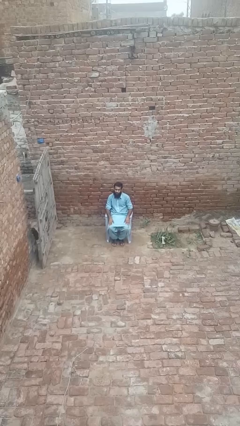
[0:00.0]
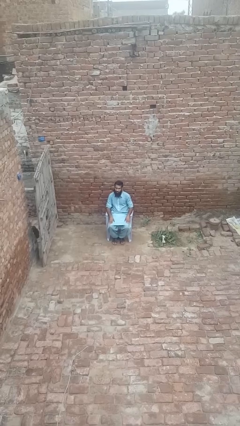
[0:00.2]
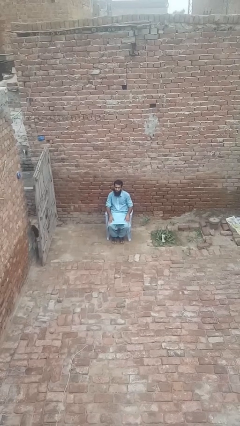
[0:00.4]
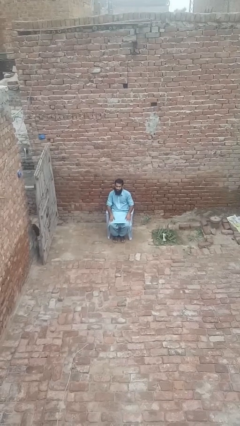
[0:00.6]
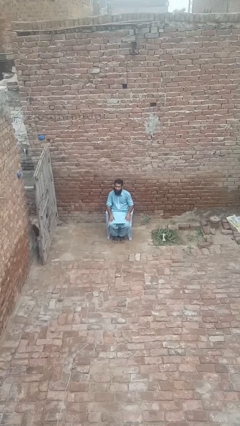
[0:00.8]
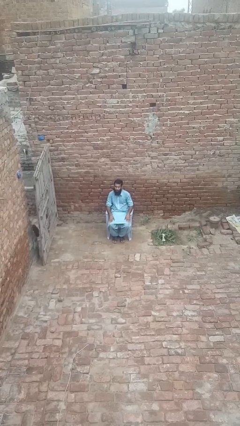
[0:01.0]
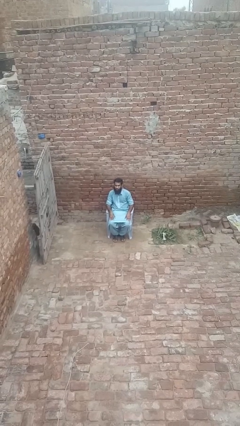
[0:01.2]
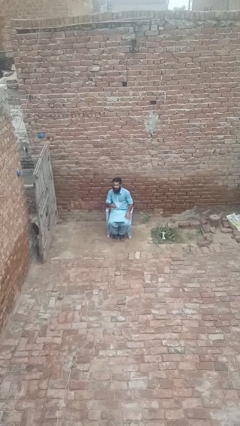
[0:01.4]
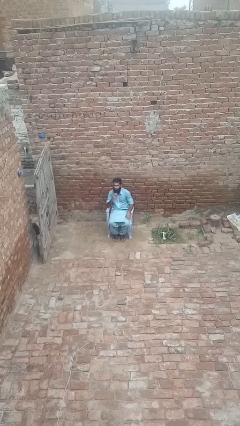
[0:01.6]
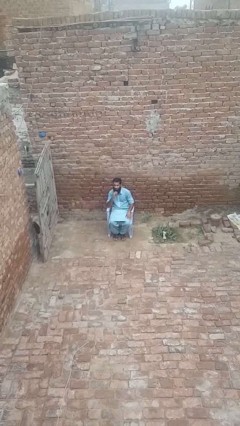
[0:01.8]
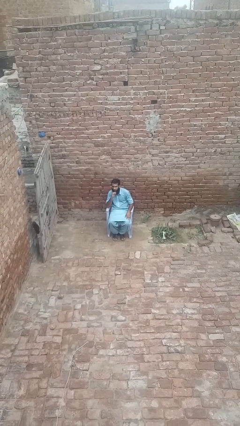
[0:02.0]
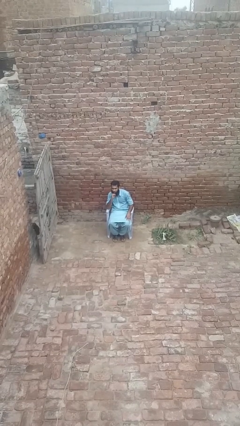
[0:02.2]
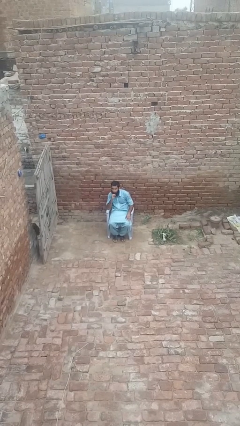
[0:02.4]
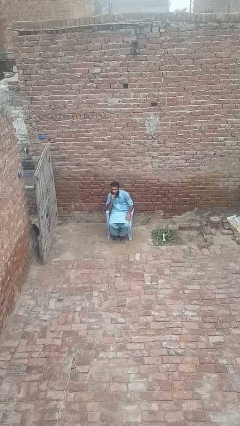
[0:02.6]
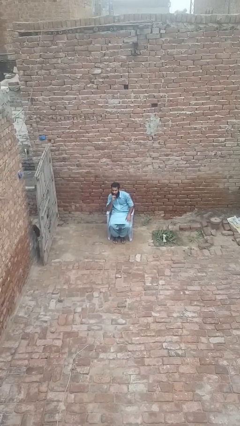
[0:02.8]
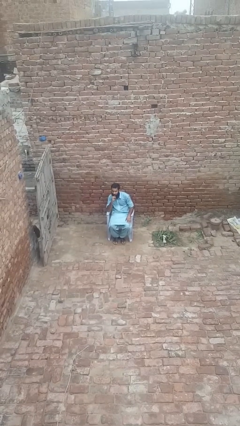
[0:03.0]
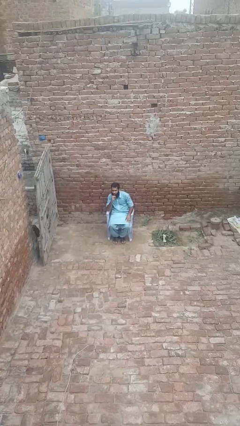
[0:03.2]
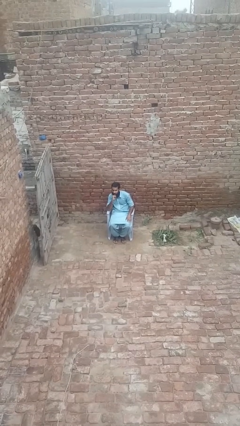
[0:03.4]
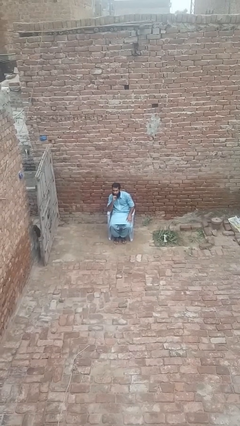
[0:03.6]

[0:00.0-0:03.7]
person strokes chin

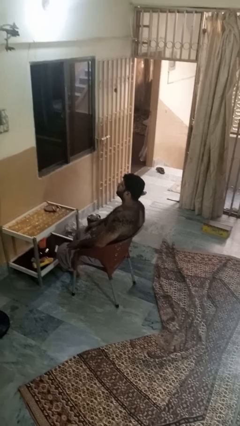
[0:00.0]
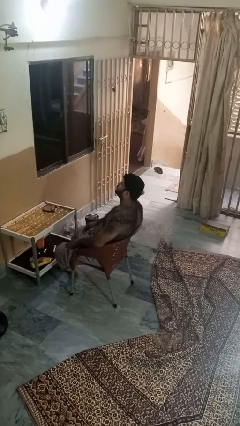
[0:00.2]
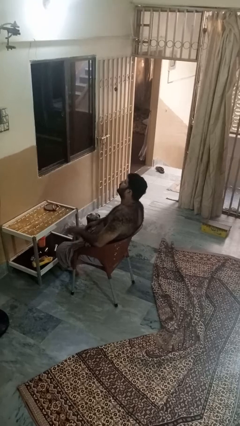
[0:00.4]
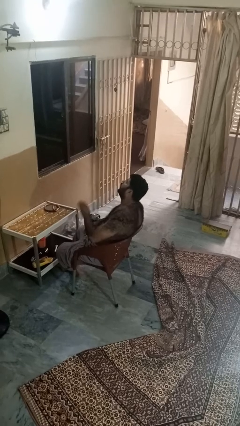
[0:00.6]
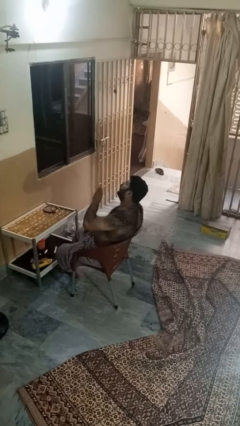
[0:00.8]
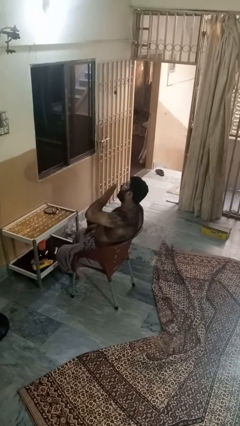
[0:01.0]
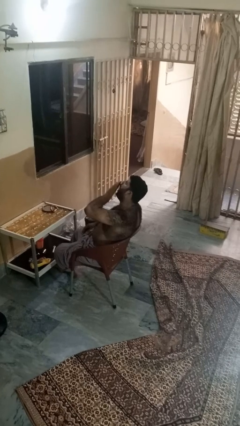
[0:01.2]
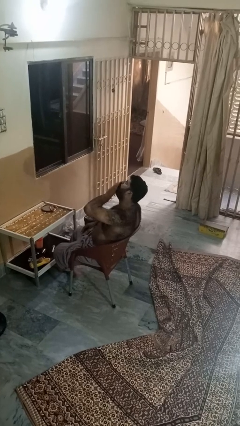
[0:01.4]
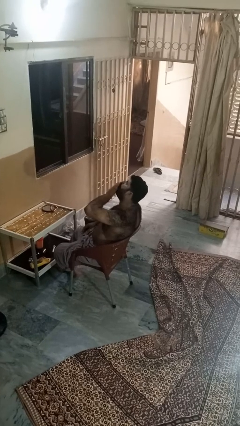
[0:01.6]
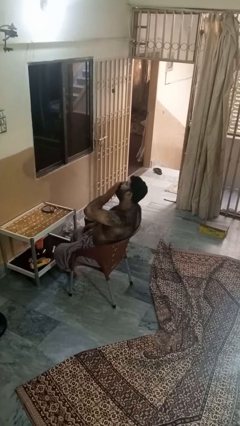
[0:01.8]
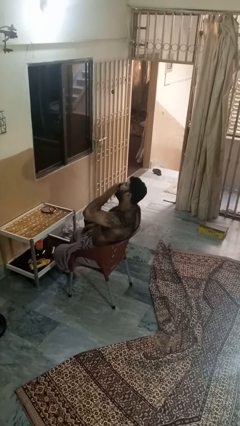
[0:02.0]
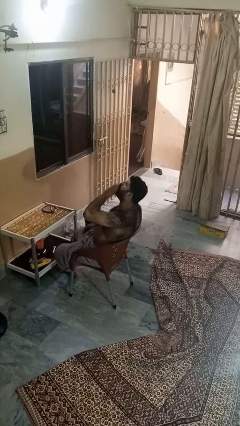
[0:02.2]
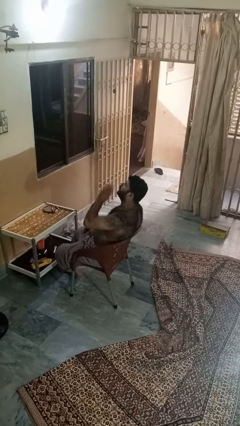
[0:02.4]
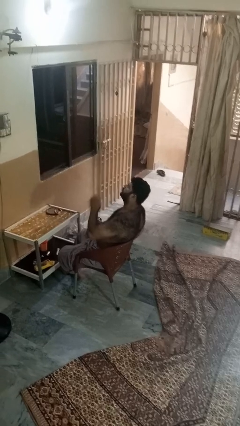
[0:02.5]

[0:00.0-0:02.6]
person yawns

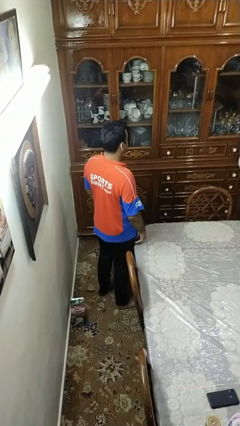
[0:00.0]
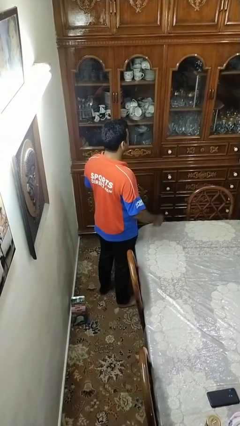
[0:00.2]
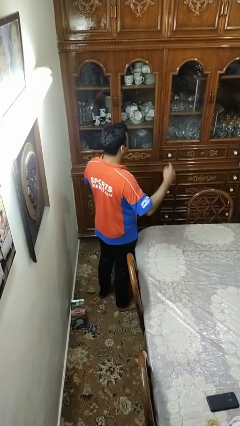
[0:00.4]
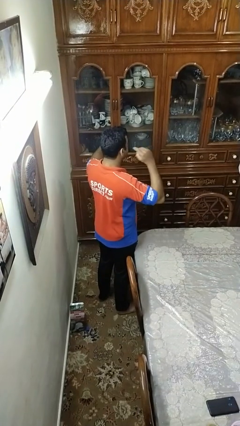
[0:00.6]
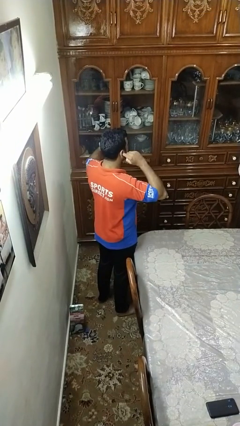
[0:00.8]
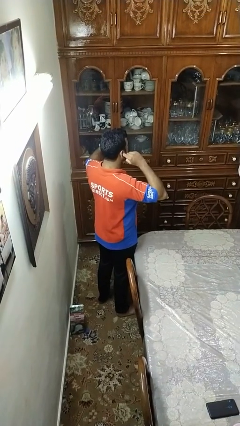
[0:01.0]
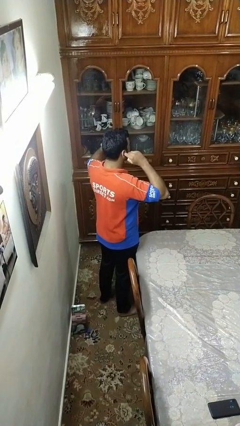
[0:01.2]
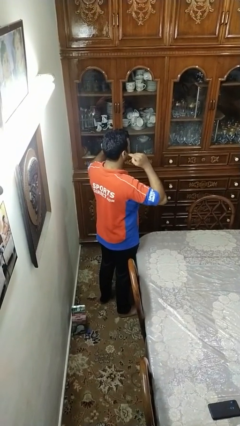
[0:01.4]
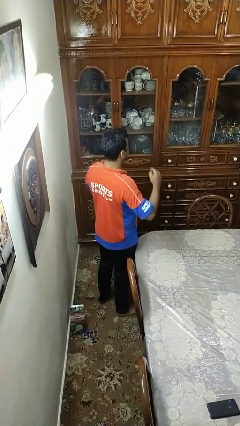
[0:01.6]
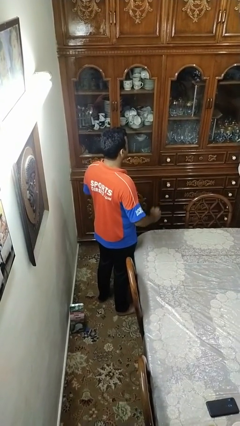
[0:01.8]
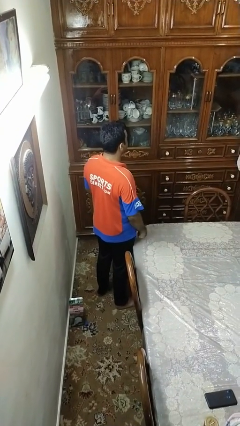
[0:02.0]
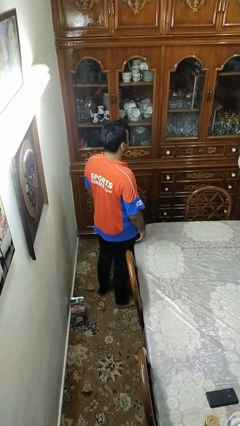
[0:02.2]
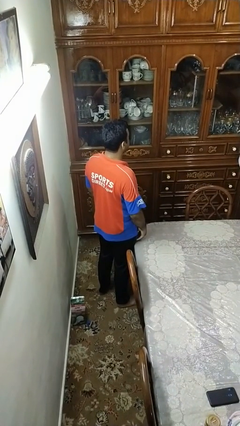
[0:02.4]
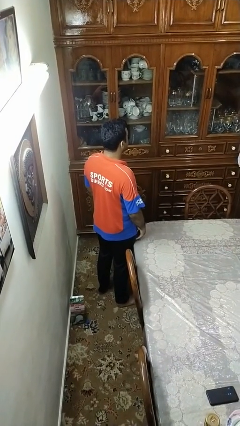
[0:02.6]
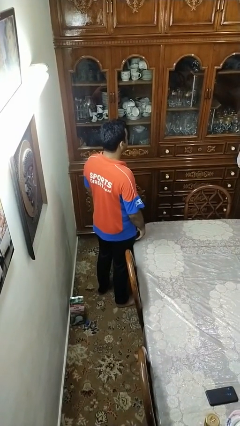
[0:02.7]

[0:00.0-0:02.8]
person puts fingers in ear

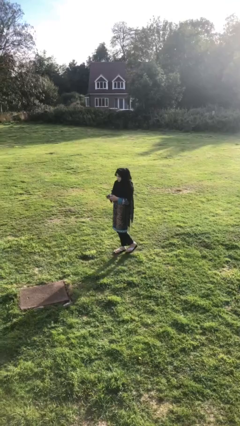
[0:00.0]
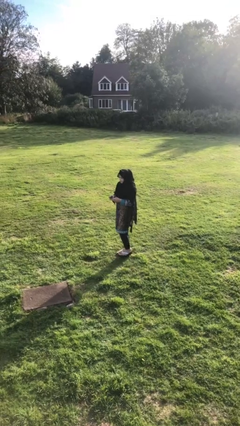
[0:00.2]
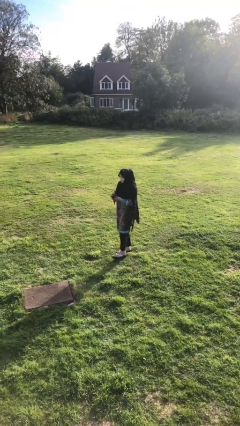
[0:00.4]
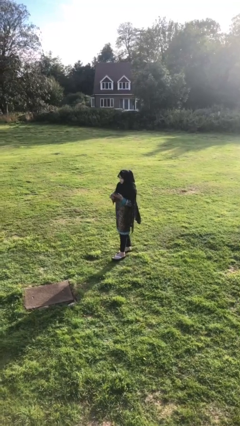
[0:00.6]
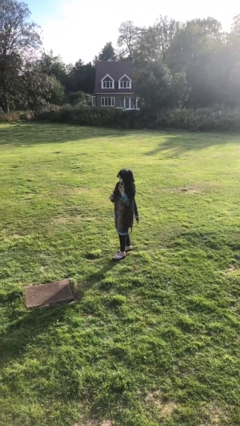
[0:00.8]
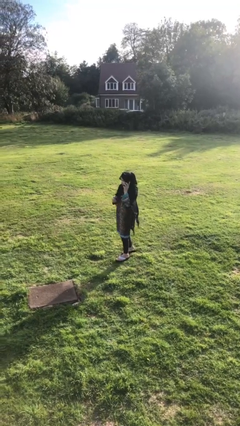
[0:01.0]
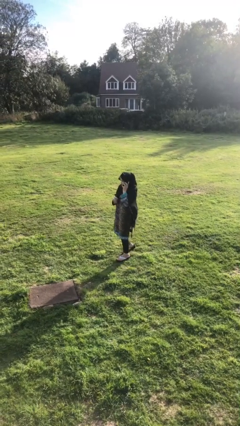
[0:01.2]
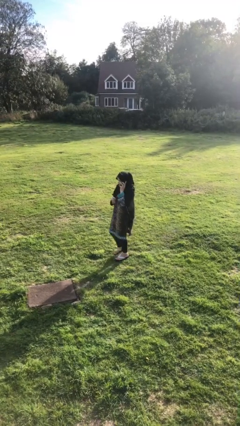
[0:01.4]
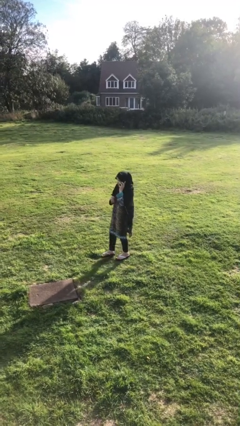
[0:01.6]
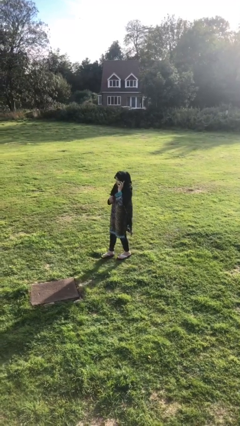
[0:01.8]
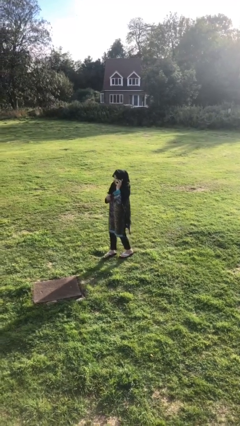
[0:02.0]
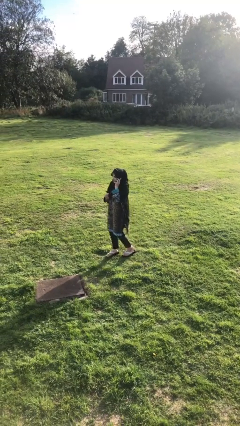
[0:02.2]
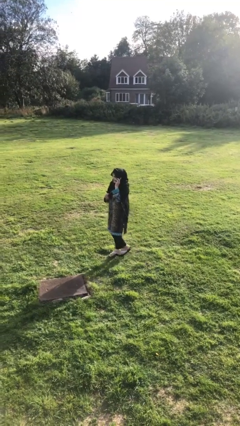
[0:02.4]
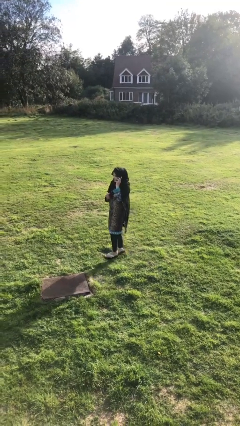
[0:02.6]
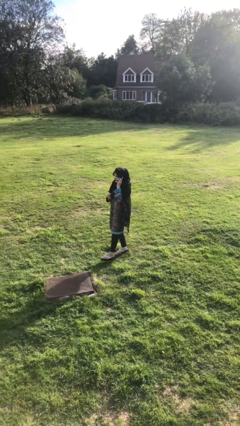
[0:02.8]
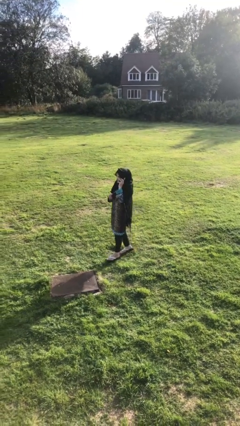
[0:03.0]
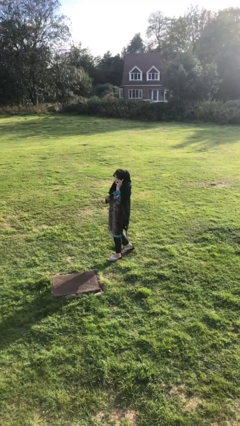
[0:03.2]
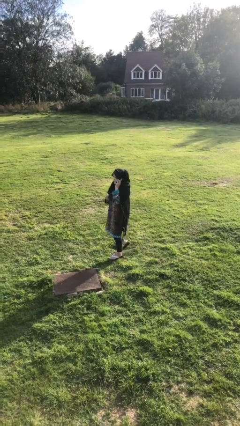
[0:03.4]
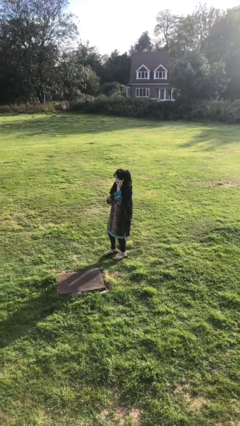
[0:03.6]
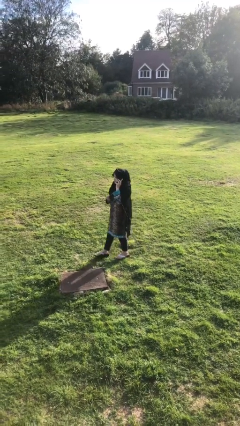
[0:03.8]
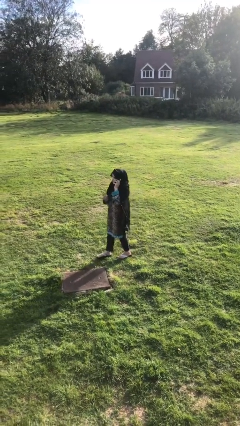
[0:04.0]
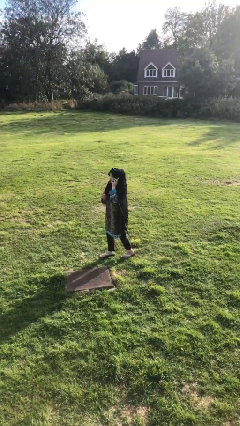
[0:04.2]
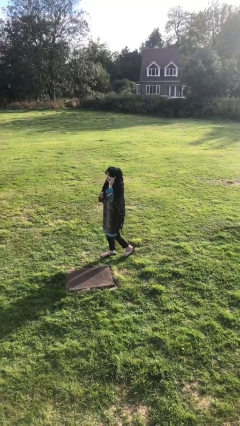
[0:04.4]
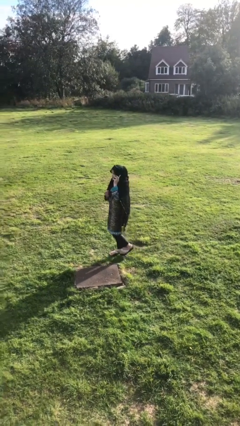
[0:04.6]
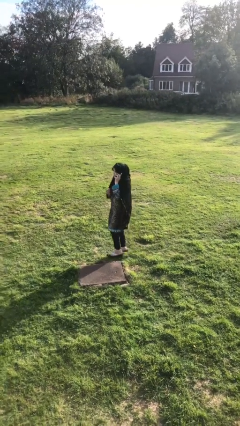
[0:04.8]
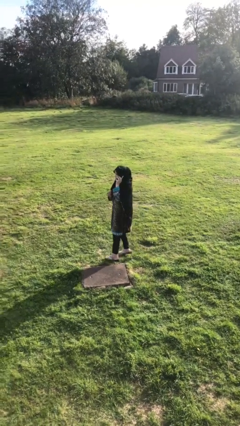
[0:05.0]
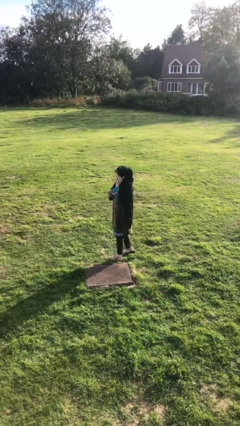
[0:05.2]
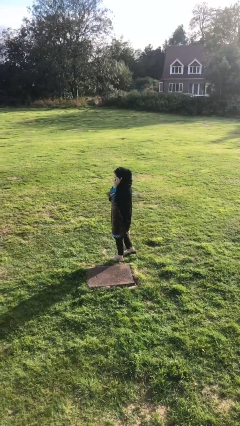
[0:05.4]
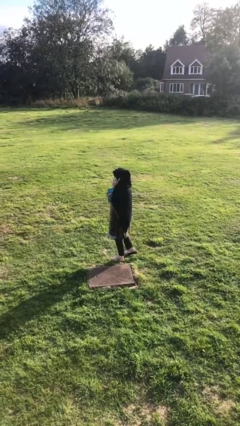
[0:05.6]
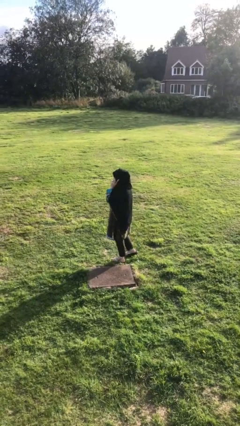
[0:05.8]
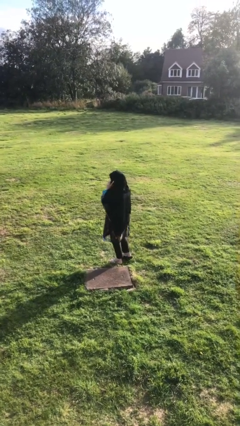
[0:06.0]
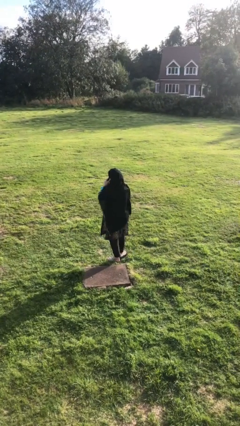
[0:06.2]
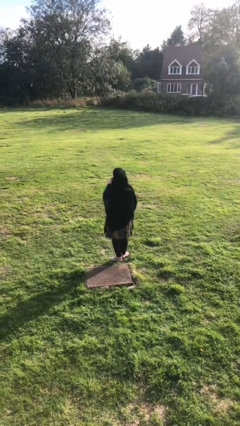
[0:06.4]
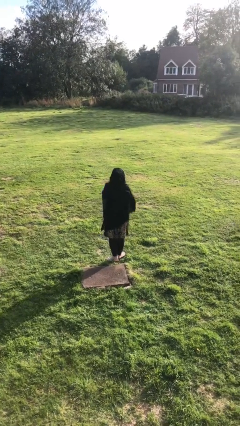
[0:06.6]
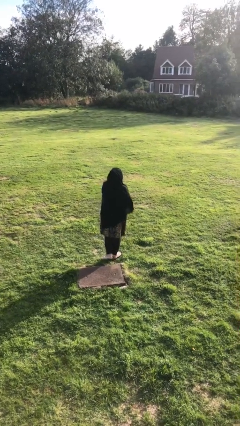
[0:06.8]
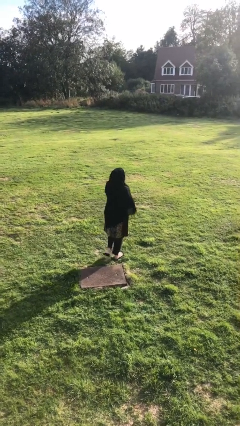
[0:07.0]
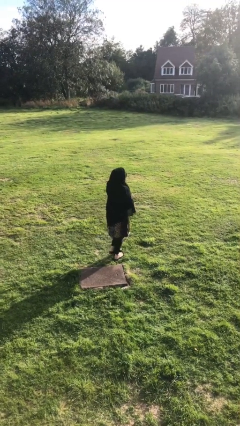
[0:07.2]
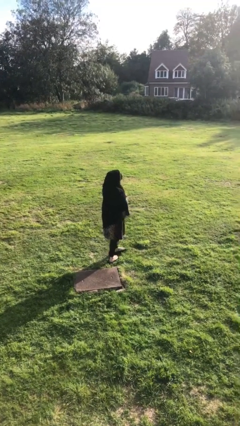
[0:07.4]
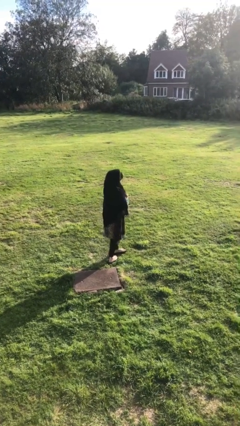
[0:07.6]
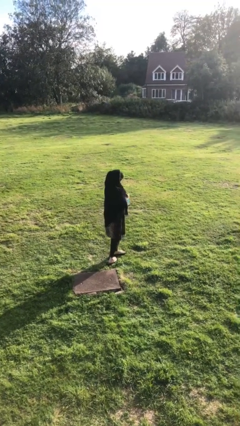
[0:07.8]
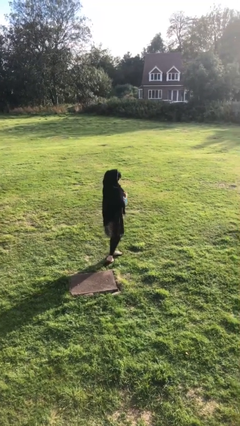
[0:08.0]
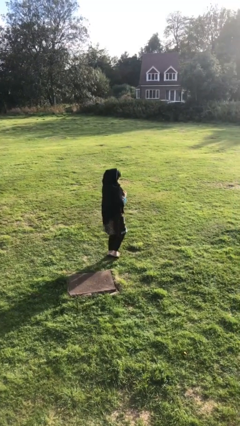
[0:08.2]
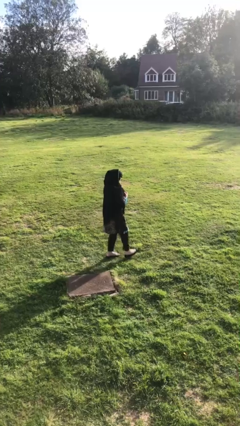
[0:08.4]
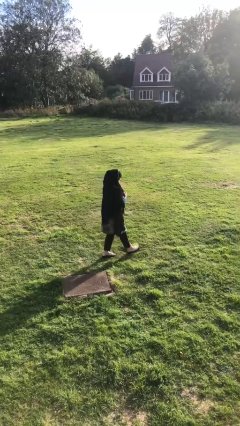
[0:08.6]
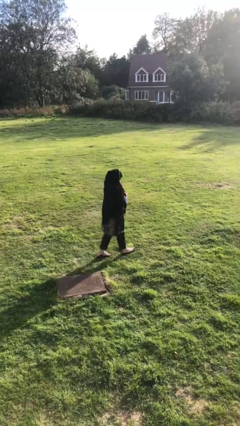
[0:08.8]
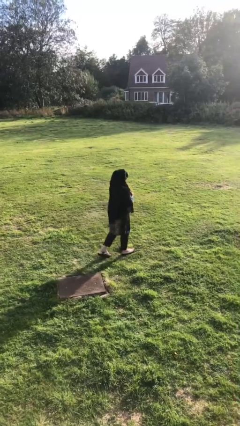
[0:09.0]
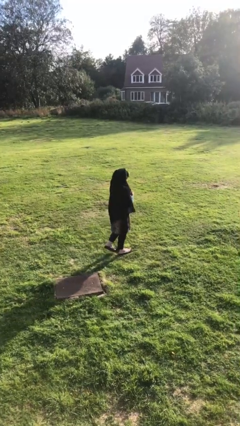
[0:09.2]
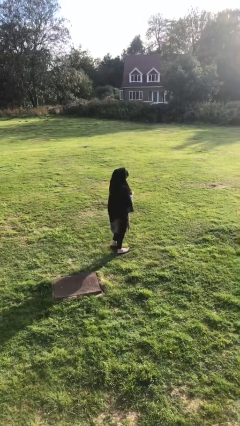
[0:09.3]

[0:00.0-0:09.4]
person talks on phone
